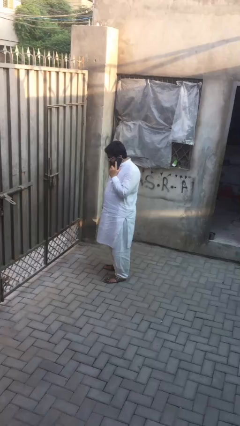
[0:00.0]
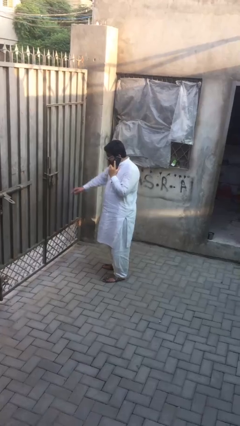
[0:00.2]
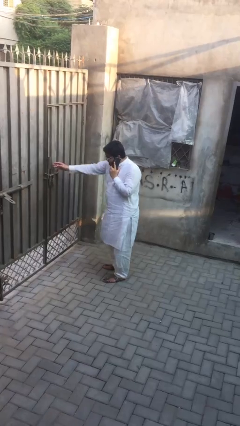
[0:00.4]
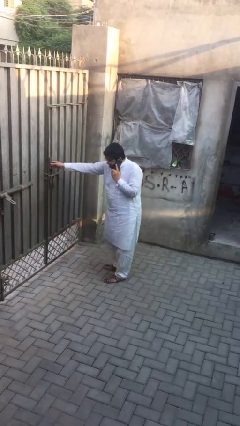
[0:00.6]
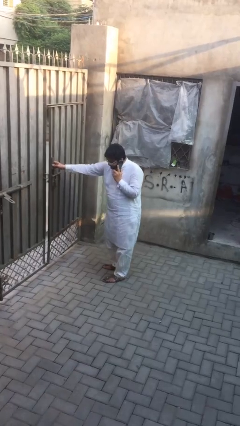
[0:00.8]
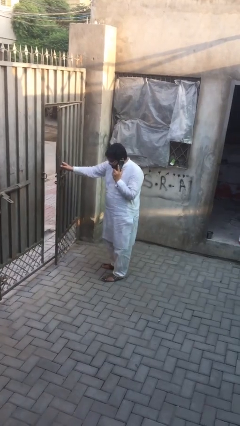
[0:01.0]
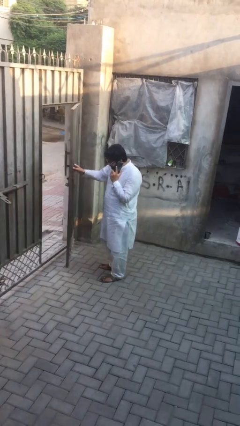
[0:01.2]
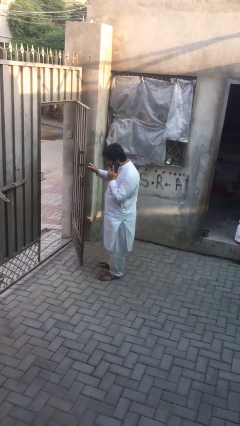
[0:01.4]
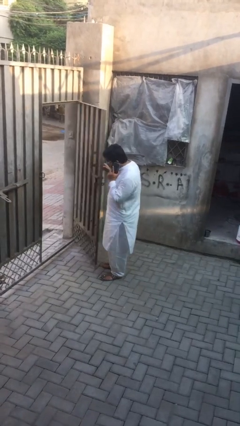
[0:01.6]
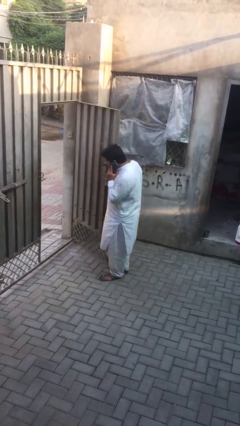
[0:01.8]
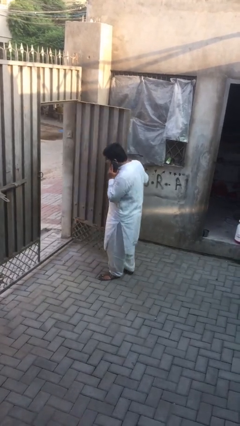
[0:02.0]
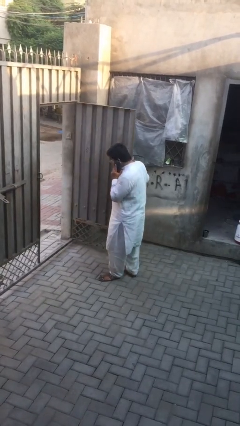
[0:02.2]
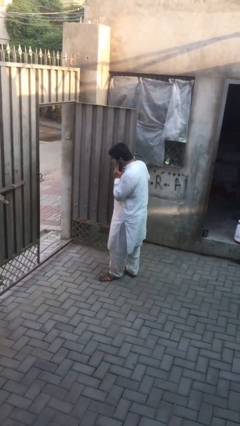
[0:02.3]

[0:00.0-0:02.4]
person opens facility door

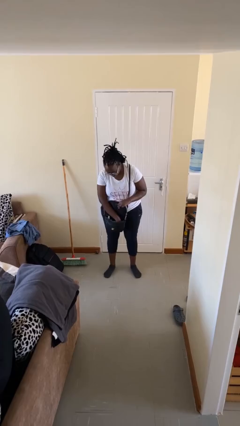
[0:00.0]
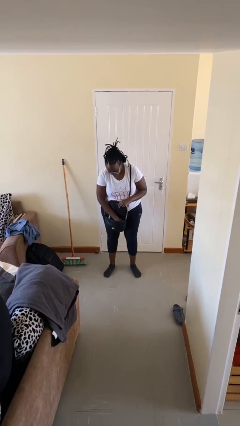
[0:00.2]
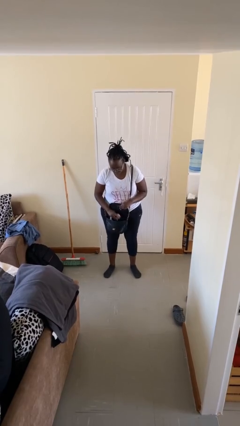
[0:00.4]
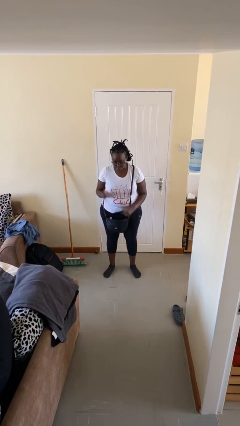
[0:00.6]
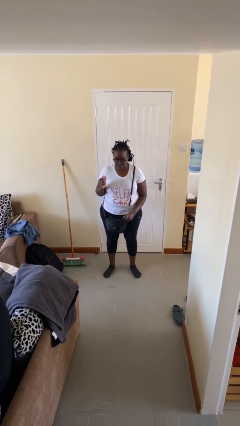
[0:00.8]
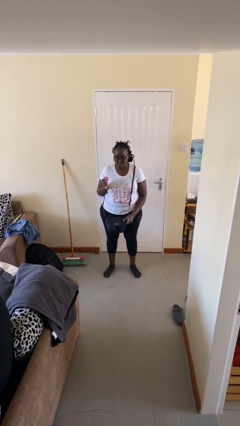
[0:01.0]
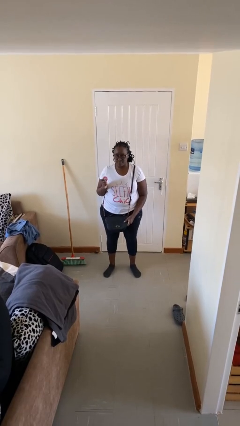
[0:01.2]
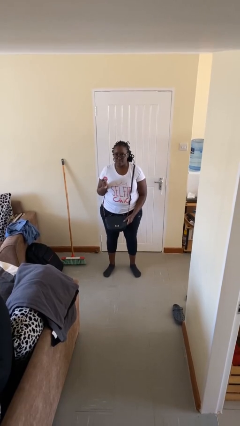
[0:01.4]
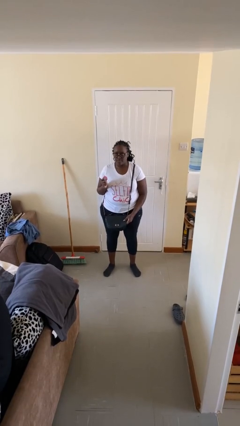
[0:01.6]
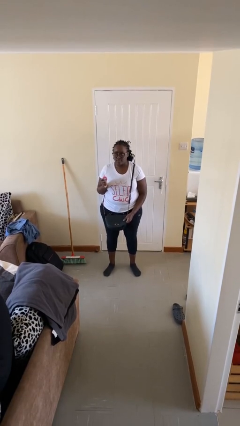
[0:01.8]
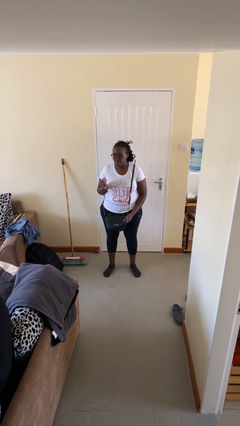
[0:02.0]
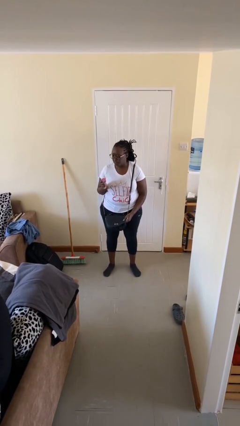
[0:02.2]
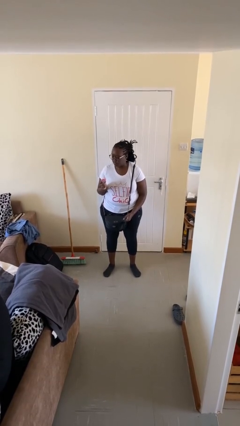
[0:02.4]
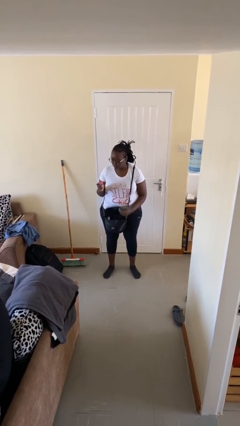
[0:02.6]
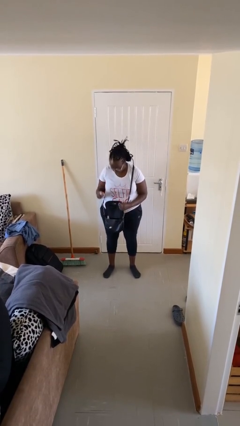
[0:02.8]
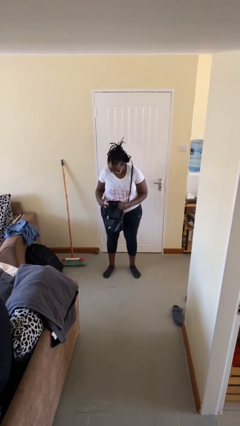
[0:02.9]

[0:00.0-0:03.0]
person takes object from purse

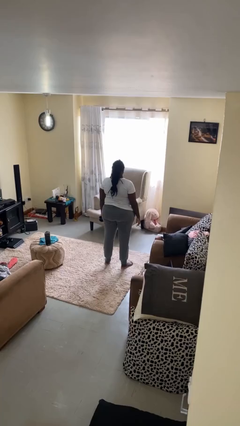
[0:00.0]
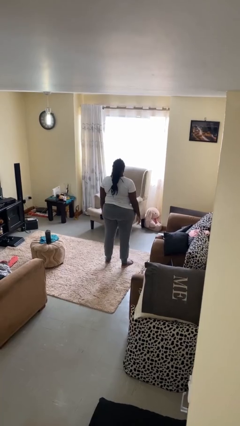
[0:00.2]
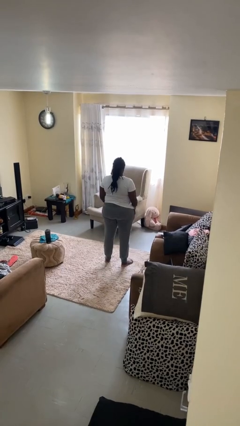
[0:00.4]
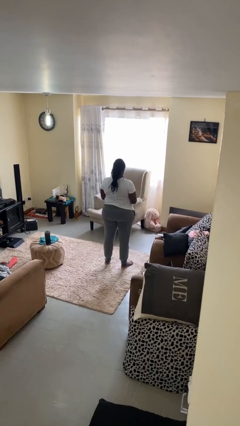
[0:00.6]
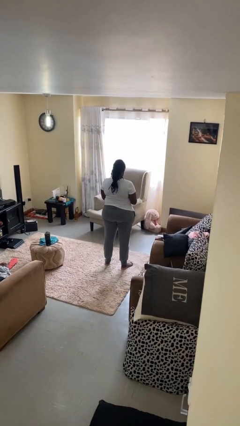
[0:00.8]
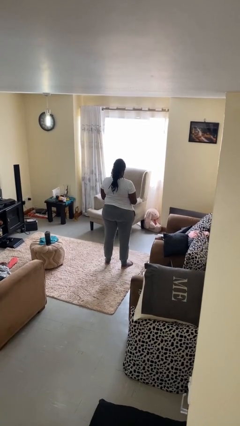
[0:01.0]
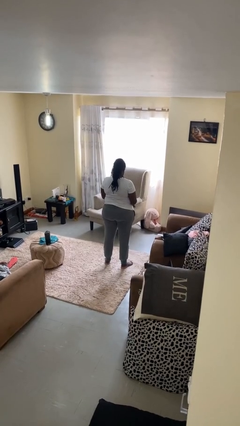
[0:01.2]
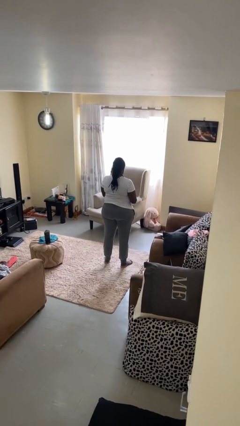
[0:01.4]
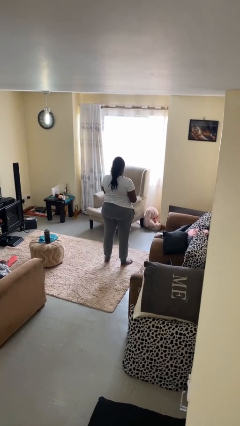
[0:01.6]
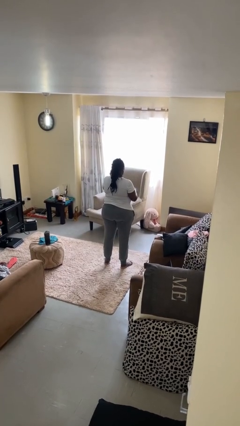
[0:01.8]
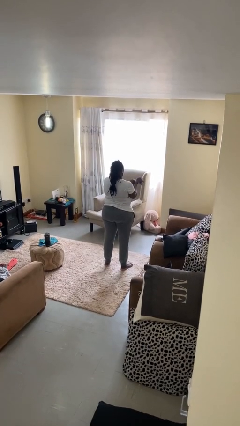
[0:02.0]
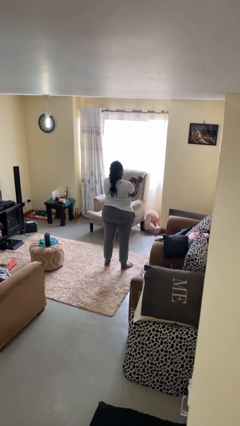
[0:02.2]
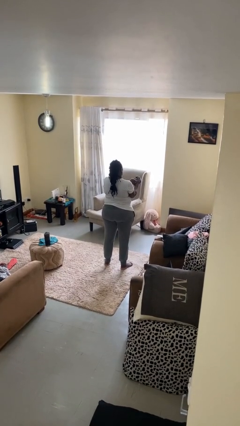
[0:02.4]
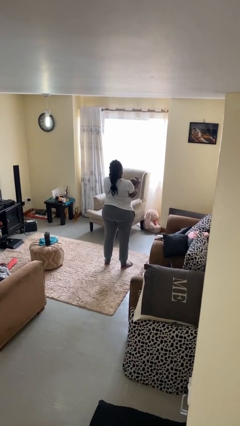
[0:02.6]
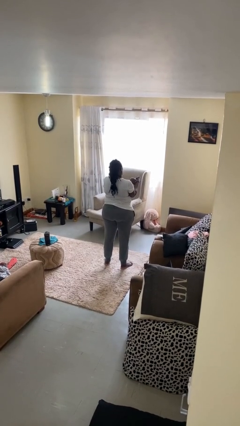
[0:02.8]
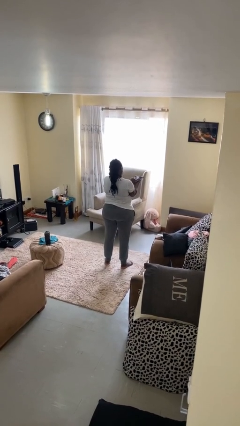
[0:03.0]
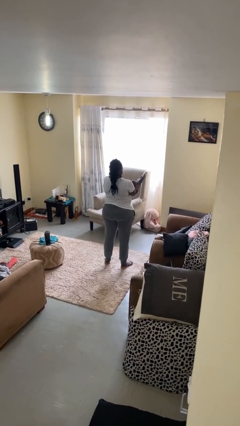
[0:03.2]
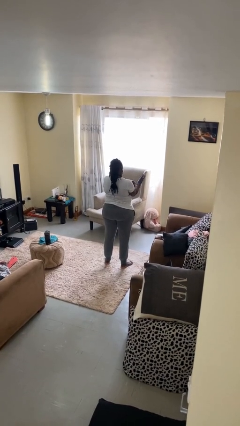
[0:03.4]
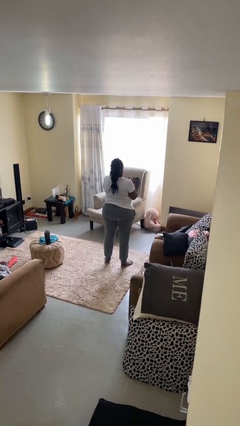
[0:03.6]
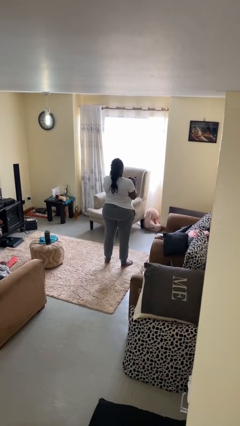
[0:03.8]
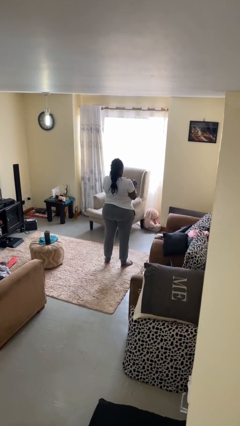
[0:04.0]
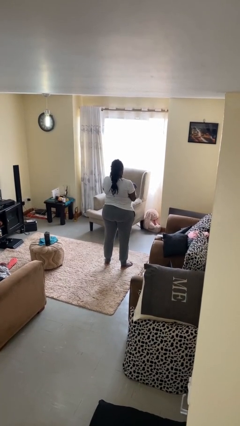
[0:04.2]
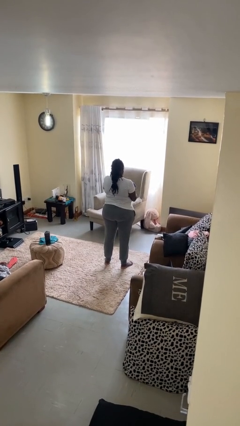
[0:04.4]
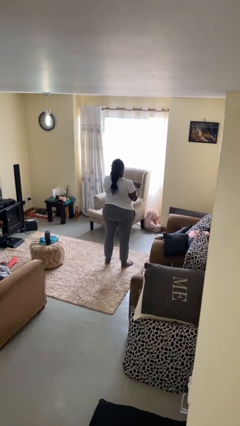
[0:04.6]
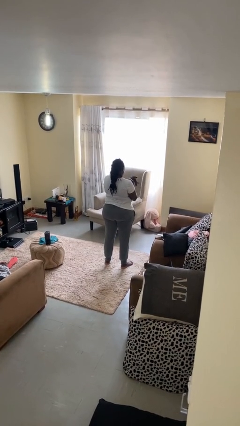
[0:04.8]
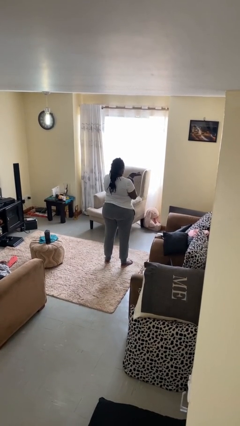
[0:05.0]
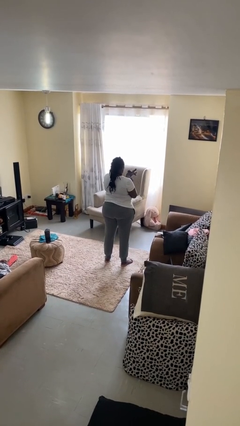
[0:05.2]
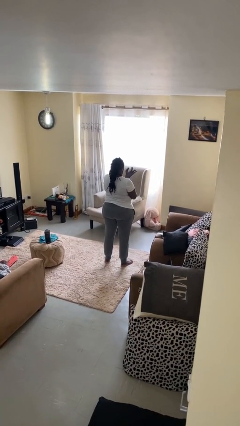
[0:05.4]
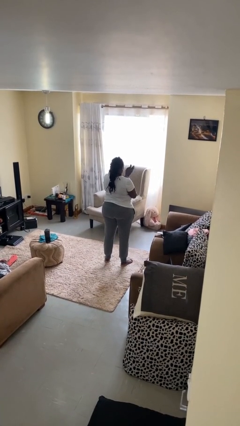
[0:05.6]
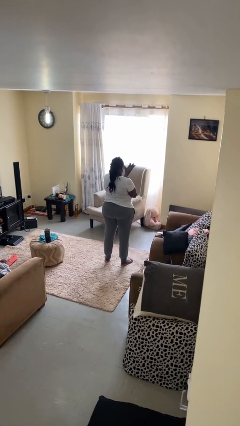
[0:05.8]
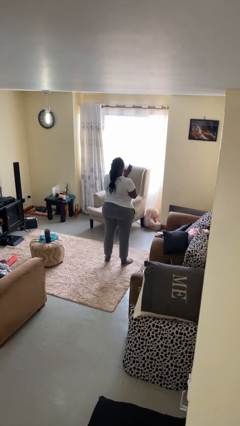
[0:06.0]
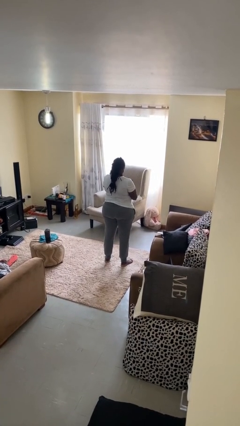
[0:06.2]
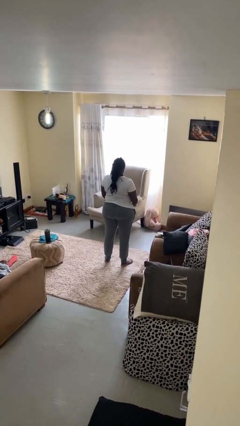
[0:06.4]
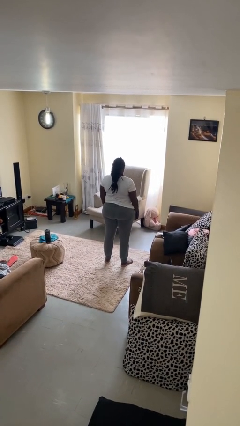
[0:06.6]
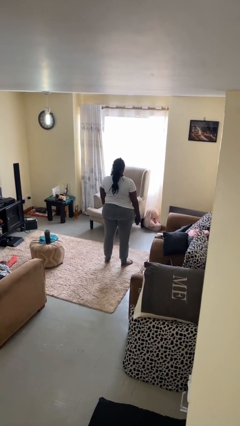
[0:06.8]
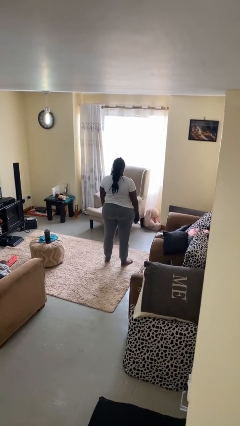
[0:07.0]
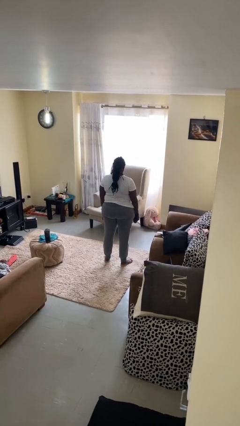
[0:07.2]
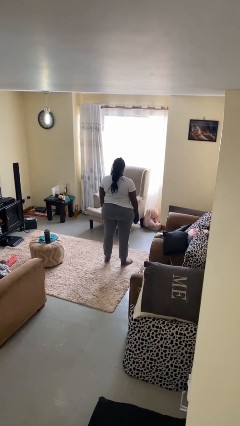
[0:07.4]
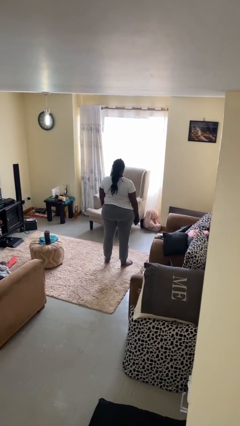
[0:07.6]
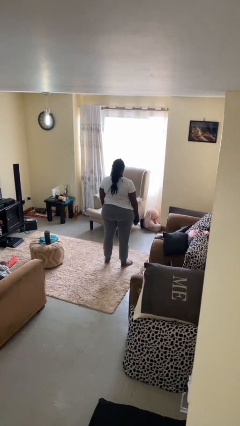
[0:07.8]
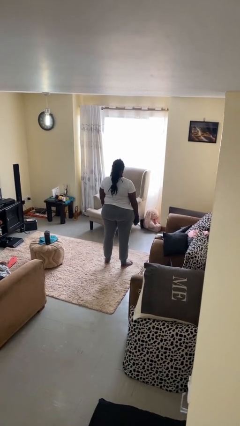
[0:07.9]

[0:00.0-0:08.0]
person puts on gloves

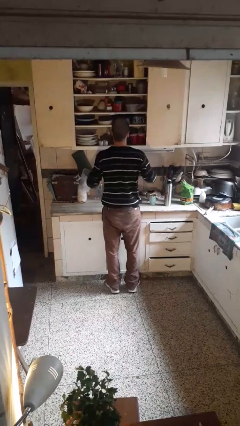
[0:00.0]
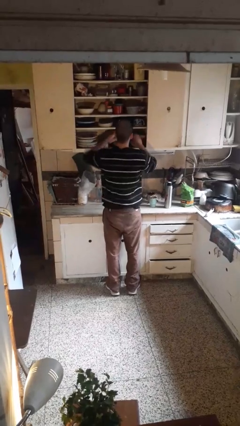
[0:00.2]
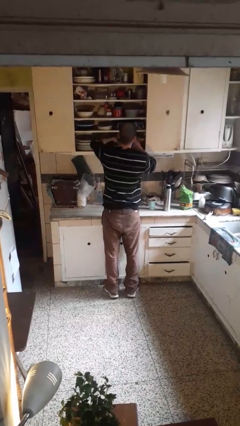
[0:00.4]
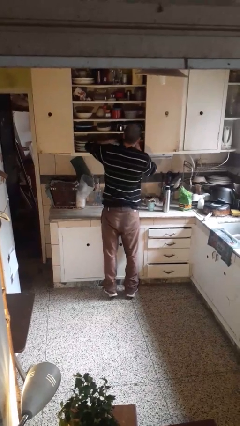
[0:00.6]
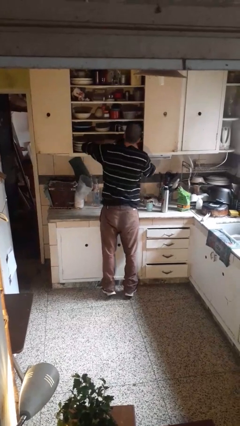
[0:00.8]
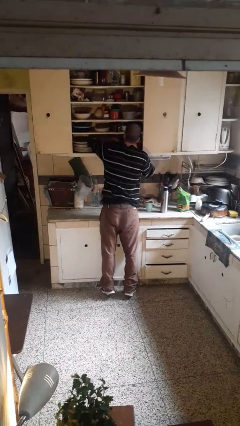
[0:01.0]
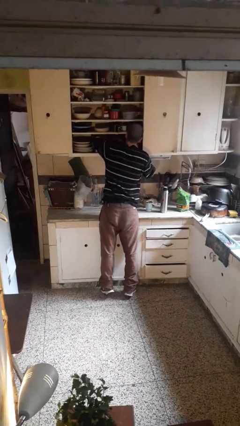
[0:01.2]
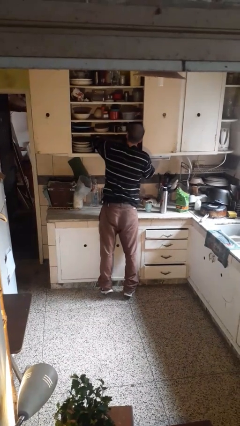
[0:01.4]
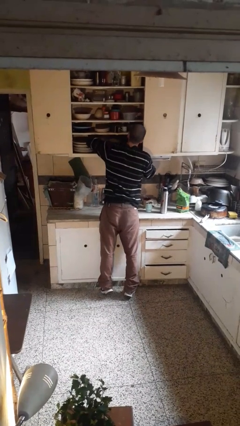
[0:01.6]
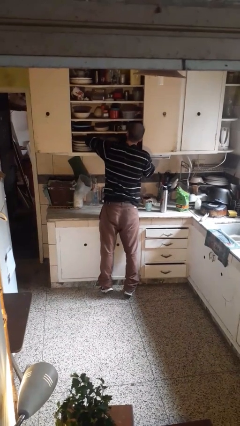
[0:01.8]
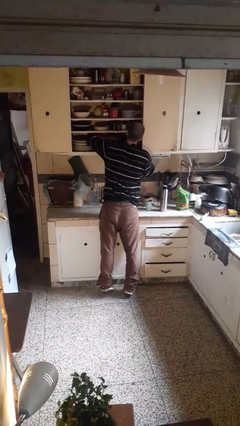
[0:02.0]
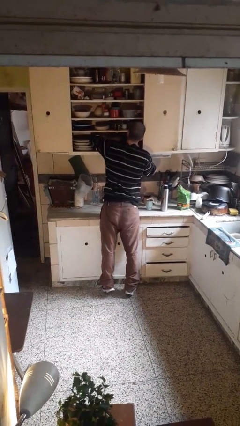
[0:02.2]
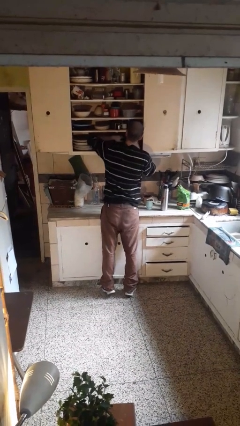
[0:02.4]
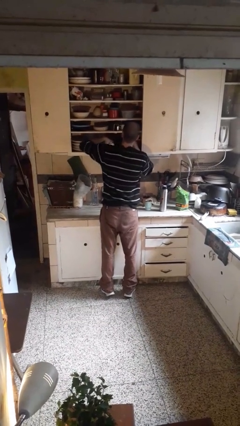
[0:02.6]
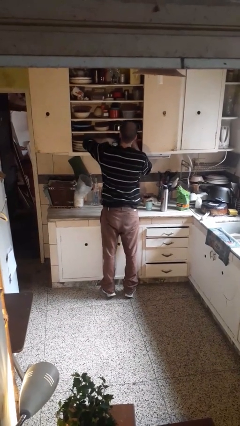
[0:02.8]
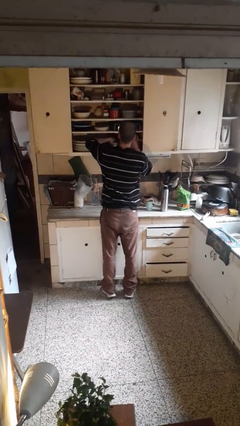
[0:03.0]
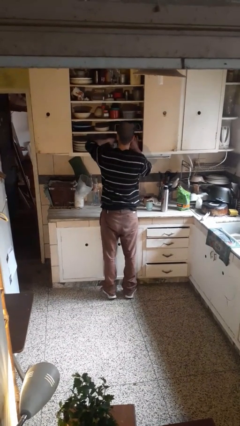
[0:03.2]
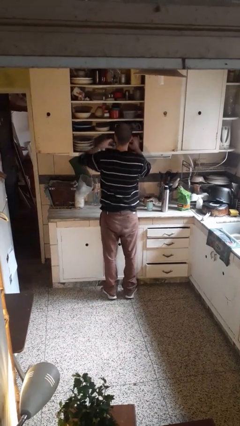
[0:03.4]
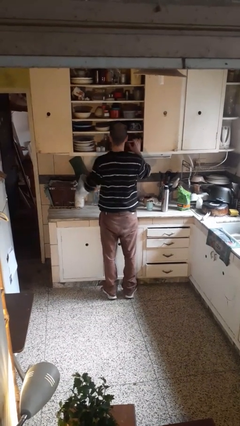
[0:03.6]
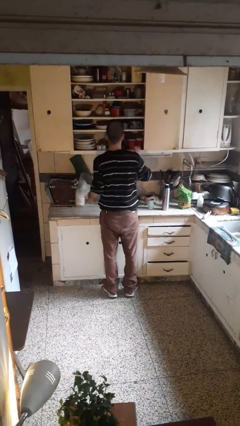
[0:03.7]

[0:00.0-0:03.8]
person searches in cabinet

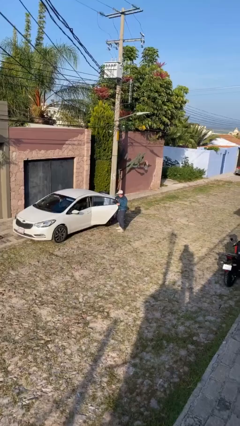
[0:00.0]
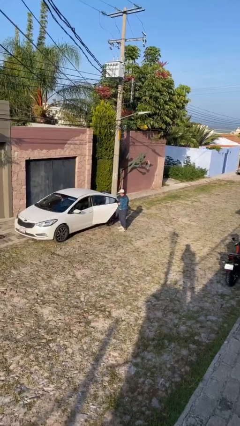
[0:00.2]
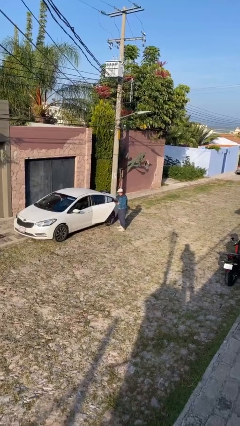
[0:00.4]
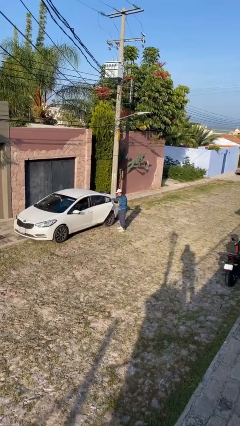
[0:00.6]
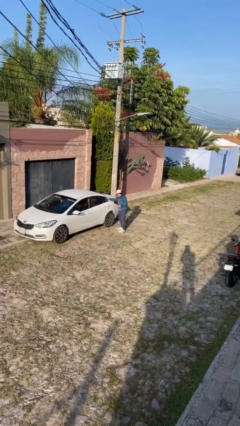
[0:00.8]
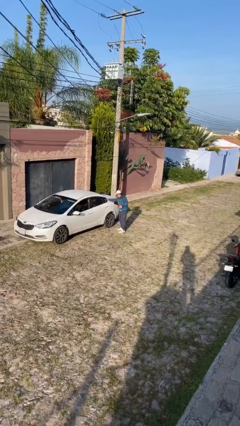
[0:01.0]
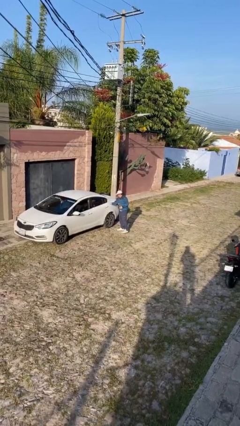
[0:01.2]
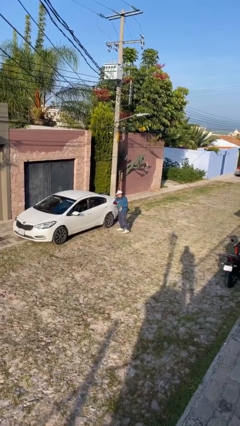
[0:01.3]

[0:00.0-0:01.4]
person closes car door
